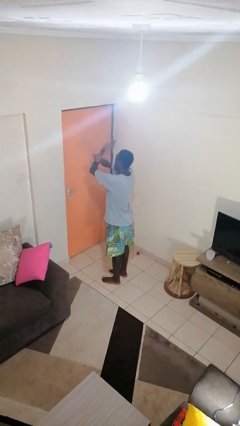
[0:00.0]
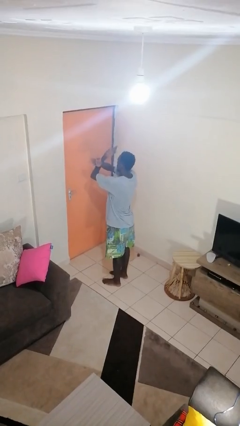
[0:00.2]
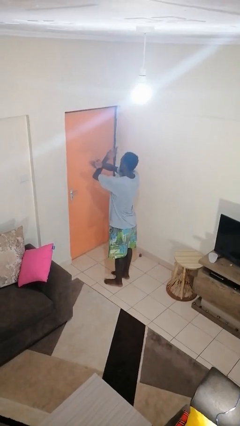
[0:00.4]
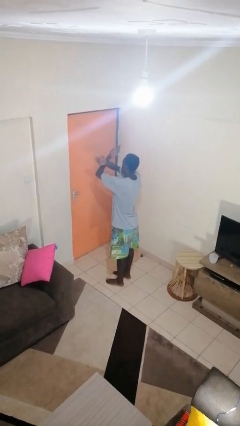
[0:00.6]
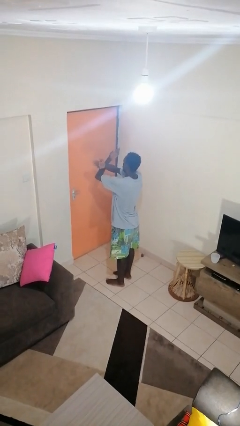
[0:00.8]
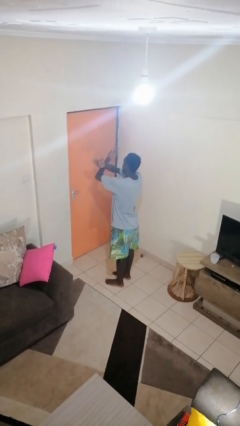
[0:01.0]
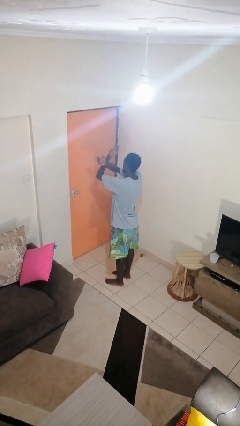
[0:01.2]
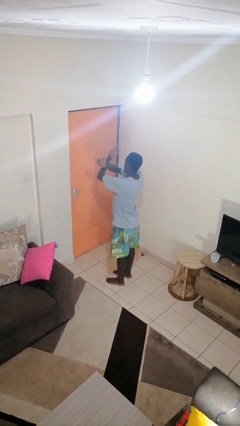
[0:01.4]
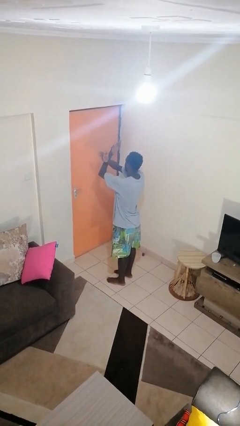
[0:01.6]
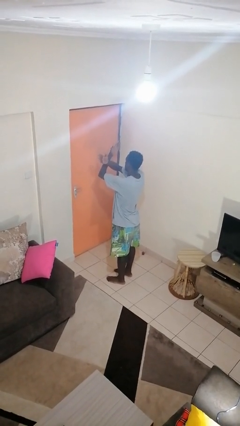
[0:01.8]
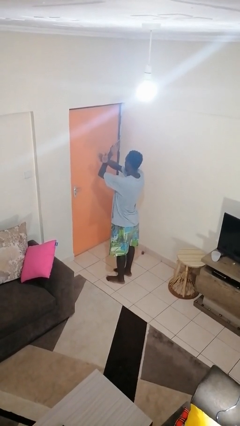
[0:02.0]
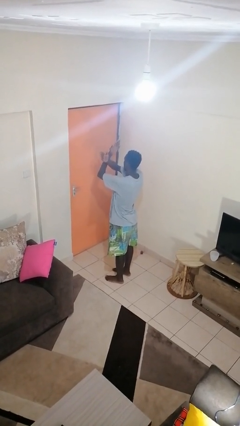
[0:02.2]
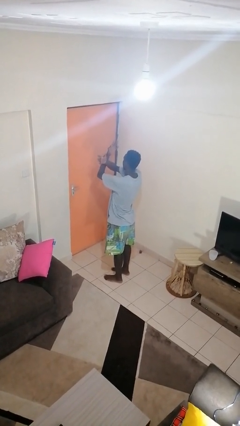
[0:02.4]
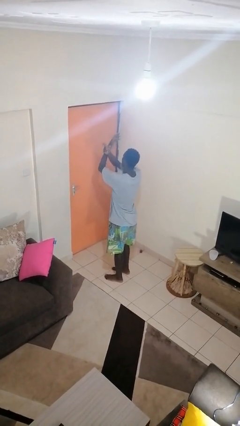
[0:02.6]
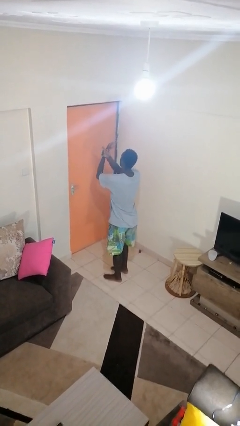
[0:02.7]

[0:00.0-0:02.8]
person gestures arms x

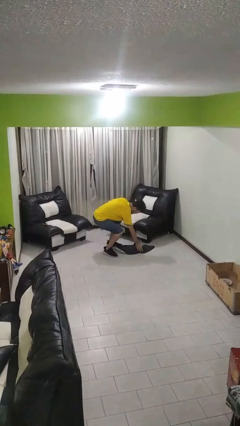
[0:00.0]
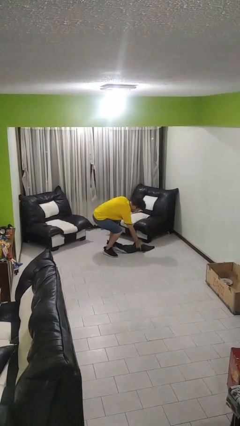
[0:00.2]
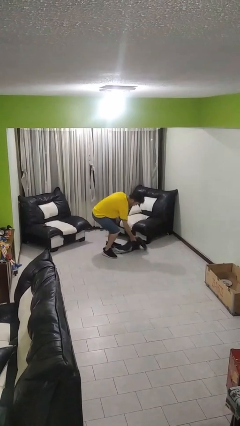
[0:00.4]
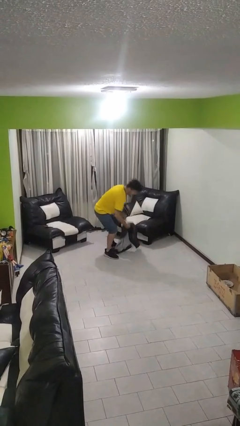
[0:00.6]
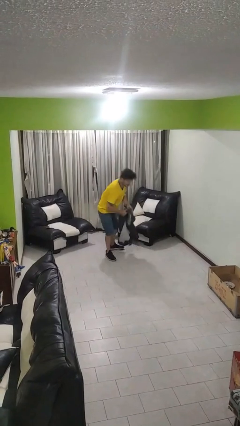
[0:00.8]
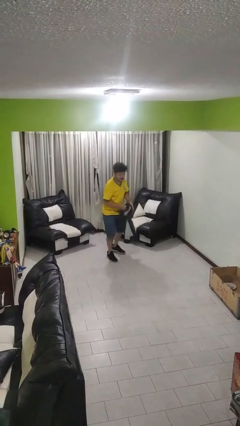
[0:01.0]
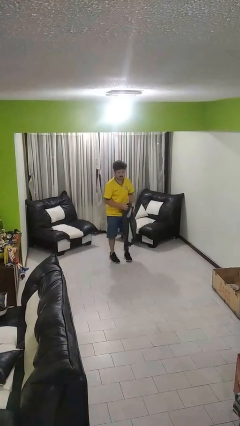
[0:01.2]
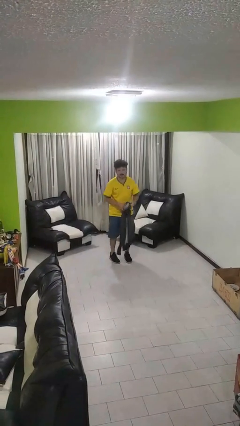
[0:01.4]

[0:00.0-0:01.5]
person picks up object from floor

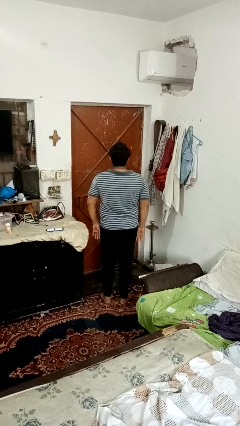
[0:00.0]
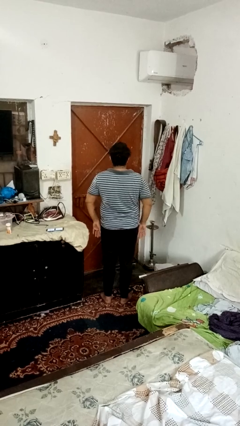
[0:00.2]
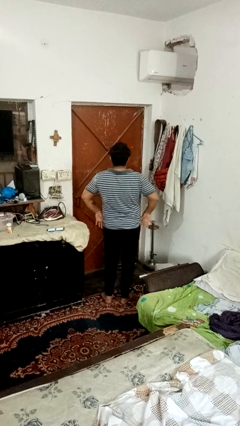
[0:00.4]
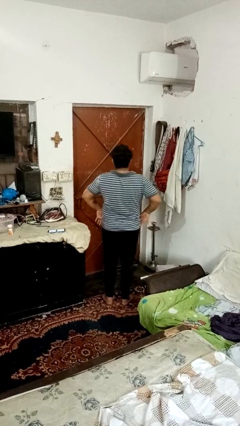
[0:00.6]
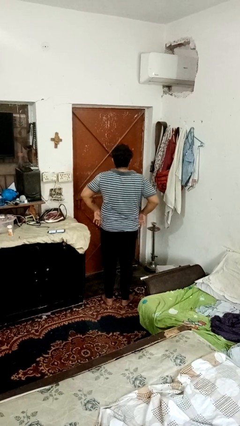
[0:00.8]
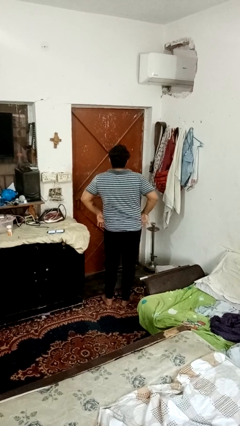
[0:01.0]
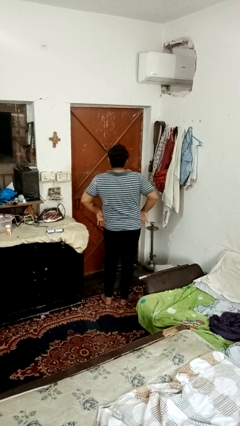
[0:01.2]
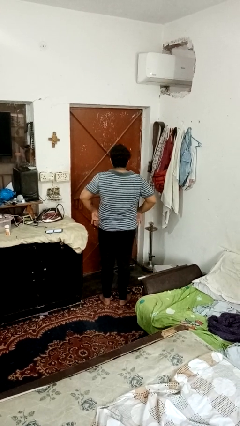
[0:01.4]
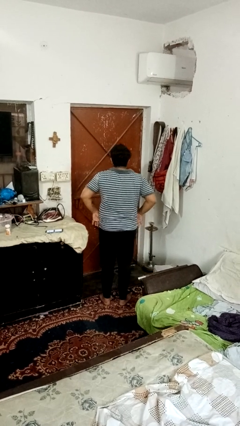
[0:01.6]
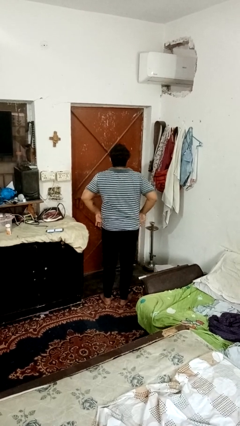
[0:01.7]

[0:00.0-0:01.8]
person wiggles hips

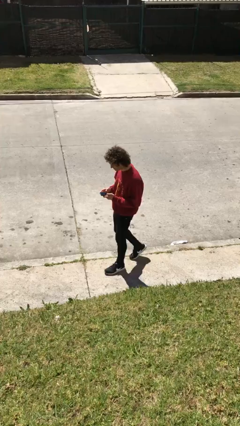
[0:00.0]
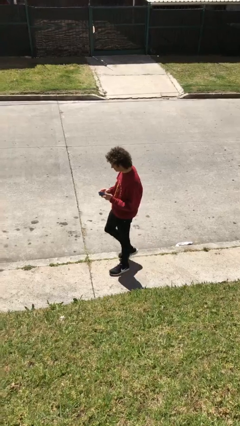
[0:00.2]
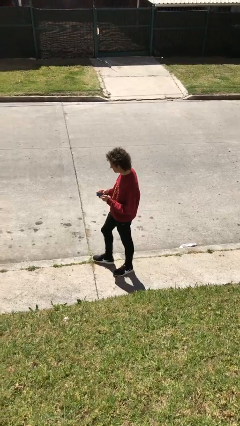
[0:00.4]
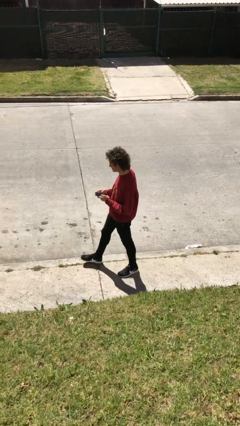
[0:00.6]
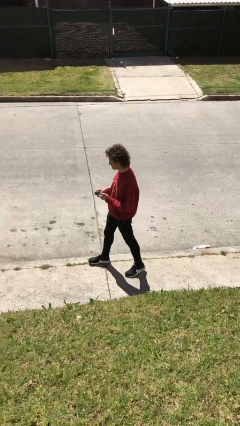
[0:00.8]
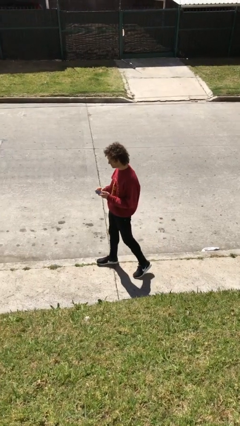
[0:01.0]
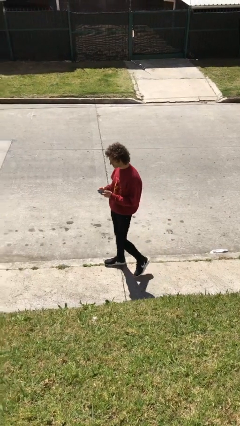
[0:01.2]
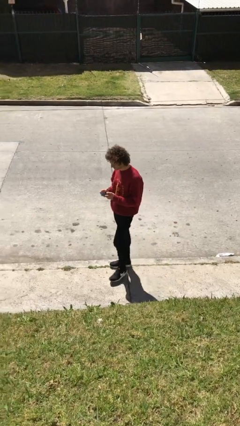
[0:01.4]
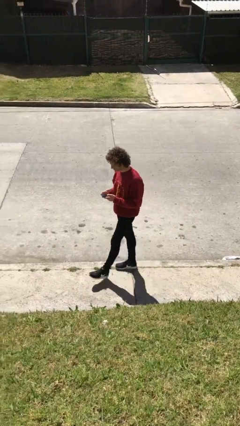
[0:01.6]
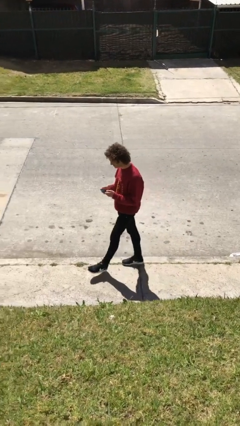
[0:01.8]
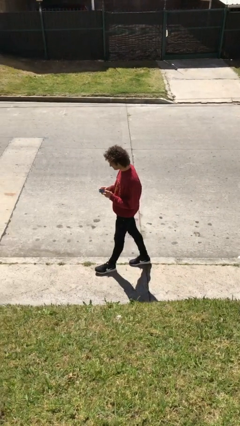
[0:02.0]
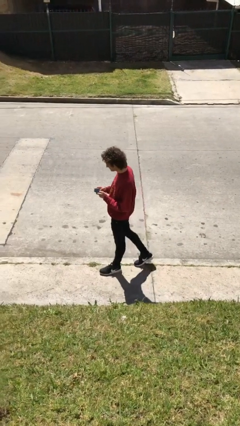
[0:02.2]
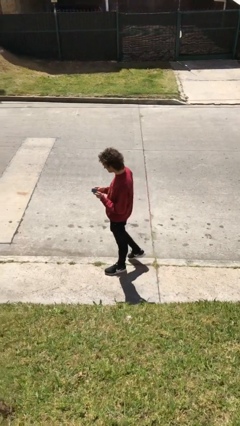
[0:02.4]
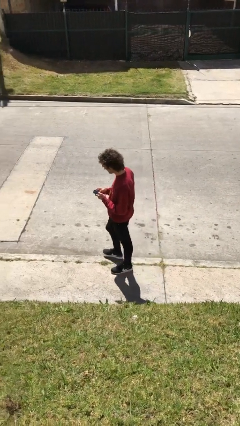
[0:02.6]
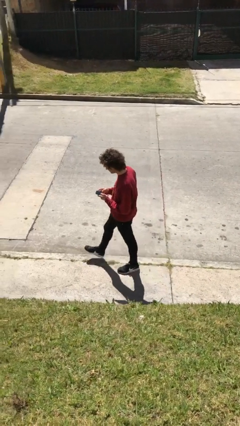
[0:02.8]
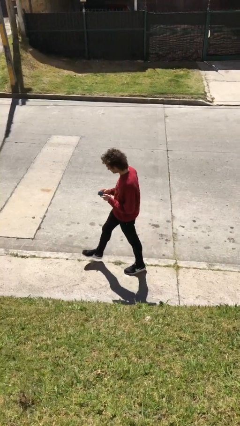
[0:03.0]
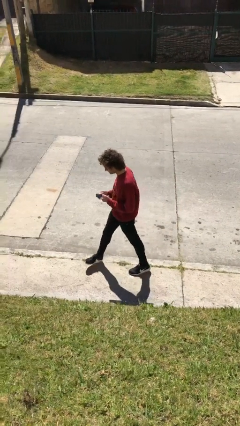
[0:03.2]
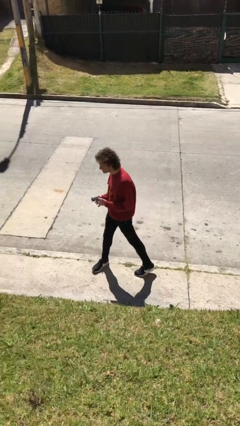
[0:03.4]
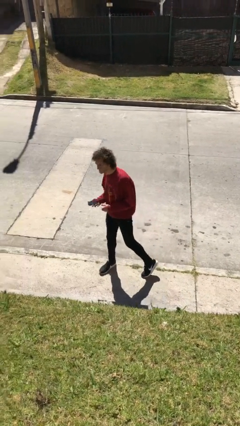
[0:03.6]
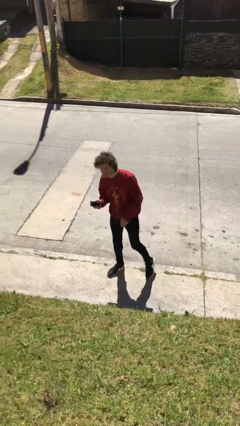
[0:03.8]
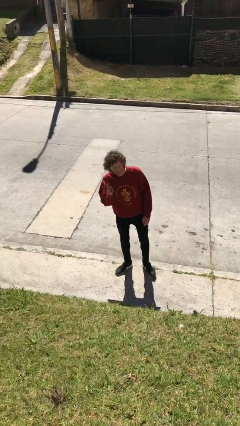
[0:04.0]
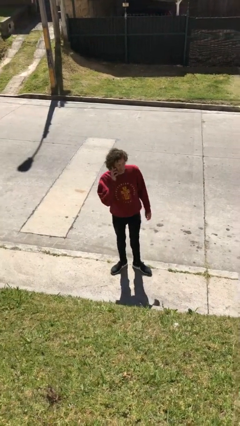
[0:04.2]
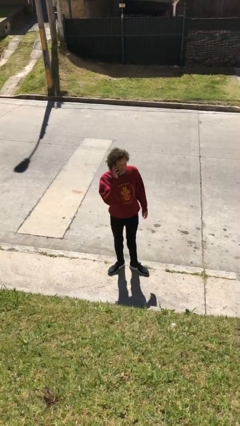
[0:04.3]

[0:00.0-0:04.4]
person texts on phone

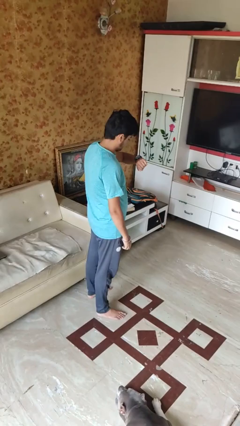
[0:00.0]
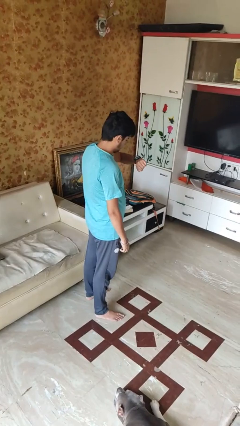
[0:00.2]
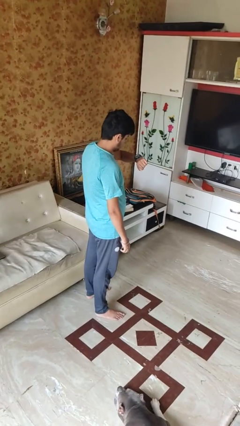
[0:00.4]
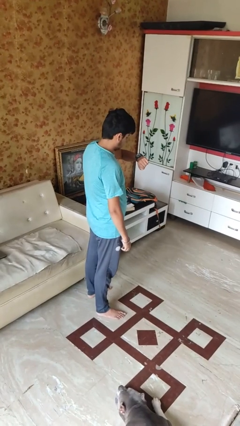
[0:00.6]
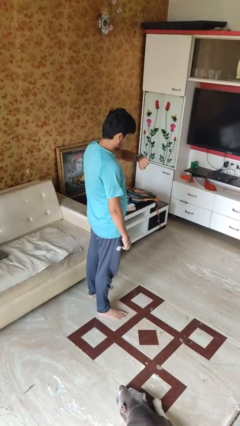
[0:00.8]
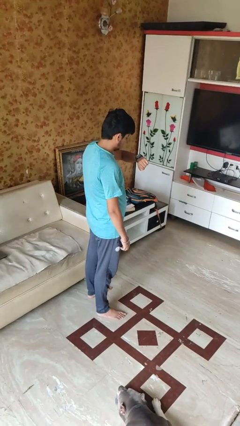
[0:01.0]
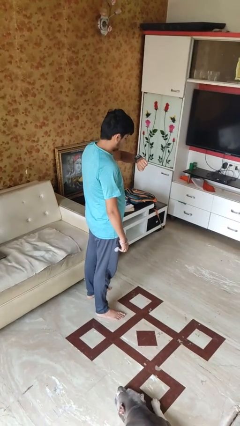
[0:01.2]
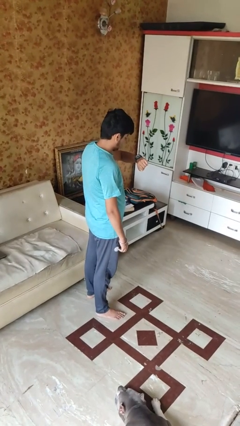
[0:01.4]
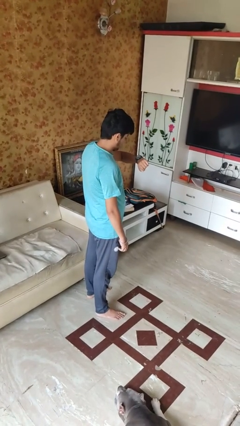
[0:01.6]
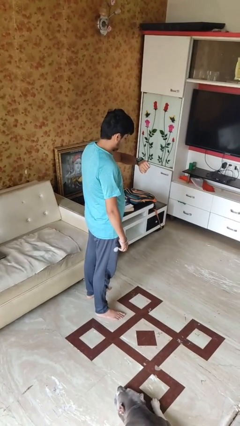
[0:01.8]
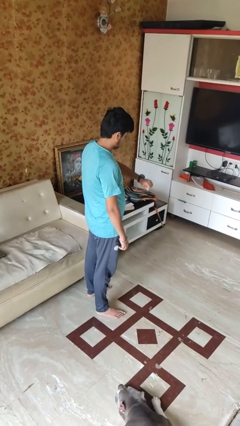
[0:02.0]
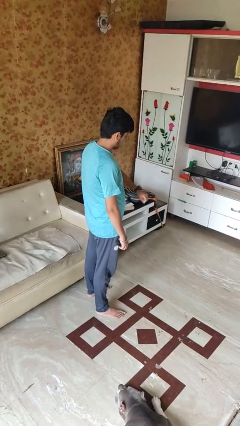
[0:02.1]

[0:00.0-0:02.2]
person looks at wristwatch

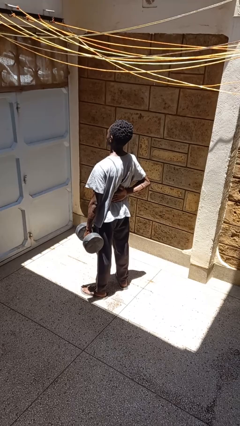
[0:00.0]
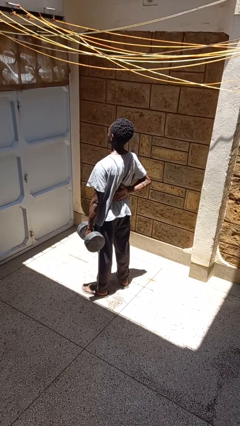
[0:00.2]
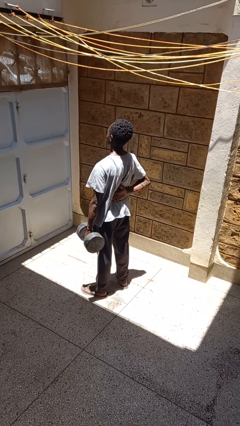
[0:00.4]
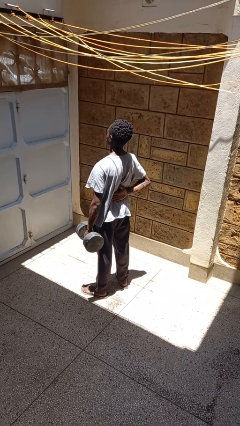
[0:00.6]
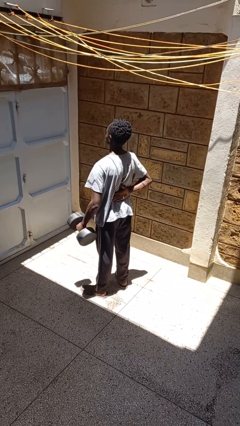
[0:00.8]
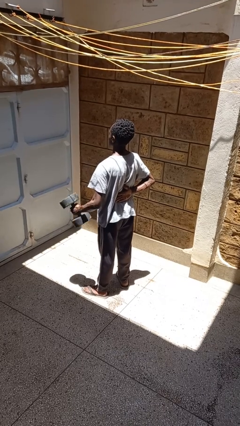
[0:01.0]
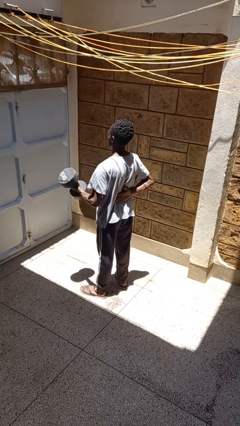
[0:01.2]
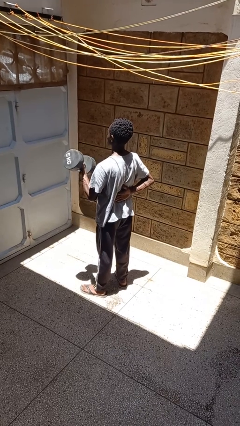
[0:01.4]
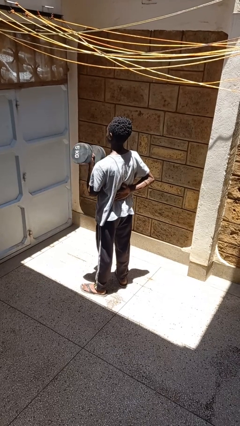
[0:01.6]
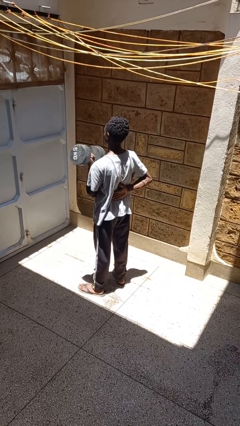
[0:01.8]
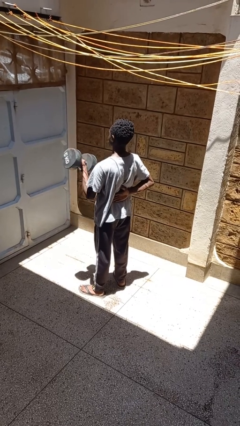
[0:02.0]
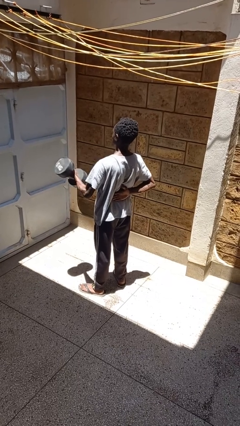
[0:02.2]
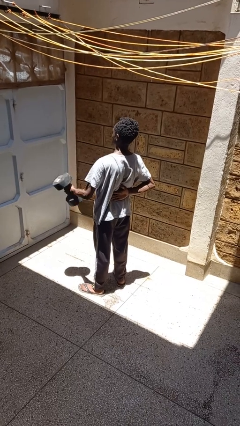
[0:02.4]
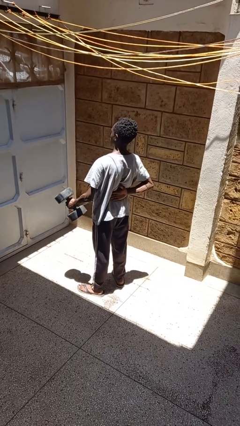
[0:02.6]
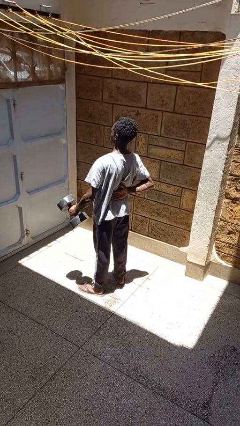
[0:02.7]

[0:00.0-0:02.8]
person lifts dumbbells

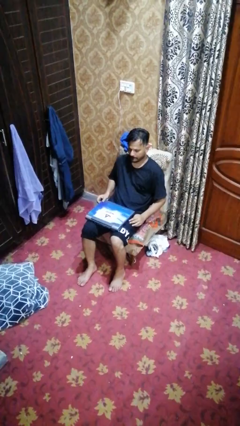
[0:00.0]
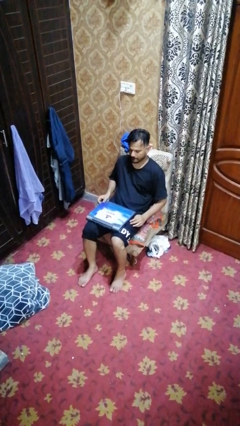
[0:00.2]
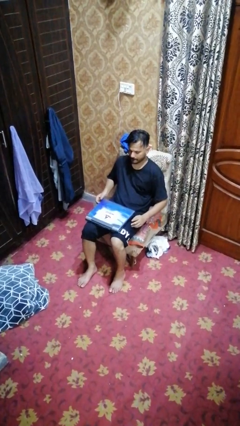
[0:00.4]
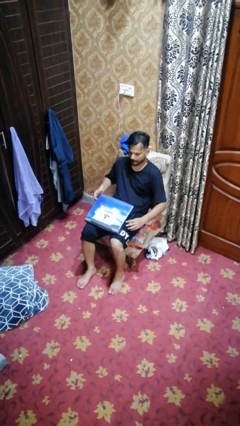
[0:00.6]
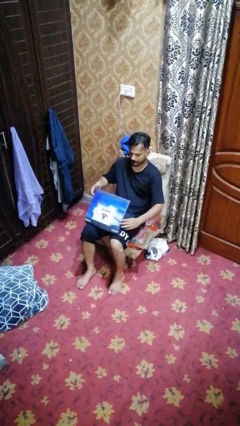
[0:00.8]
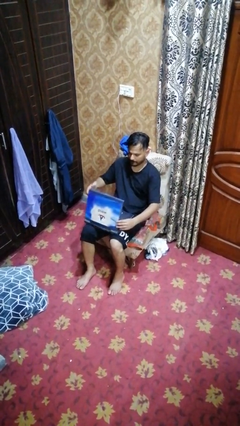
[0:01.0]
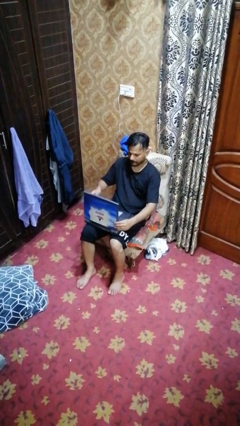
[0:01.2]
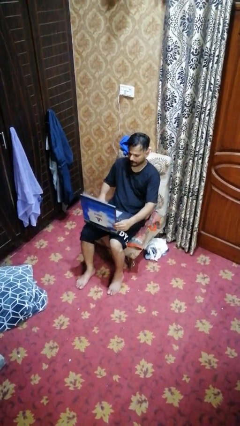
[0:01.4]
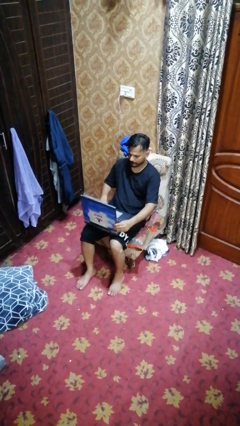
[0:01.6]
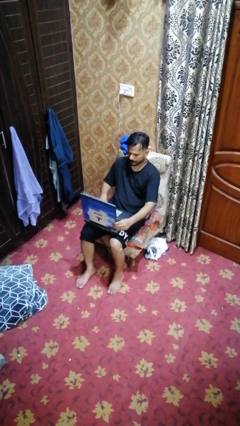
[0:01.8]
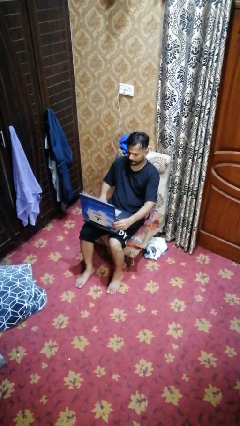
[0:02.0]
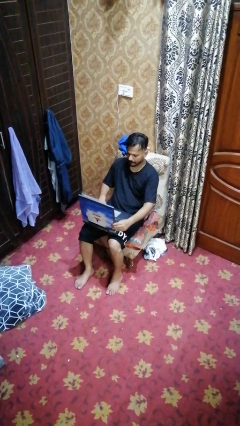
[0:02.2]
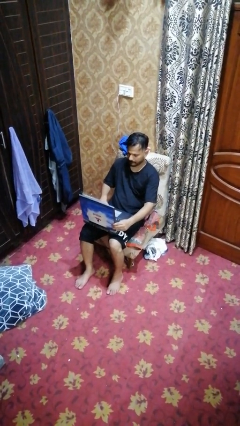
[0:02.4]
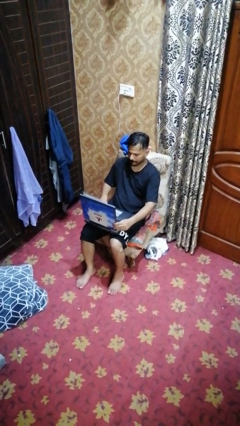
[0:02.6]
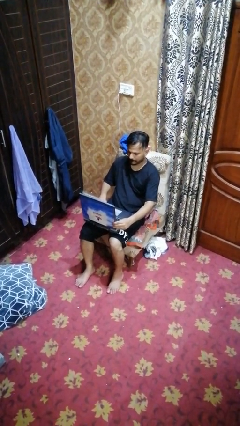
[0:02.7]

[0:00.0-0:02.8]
person opens laptop
